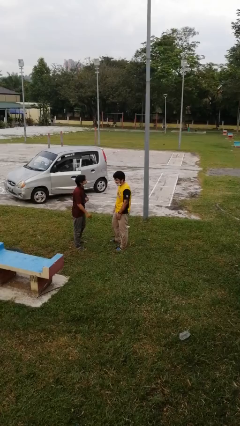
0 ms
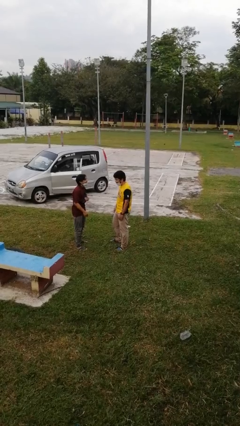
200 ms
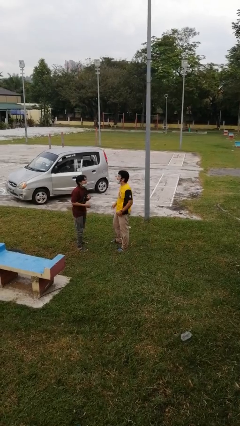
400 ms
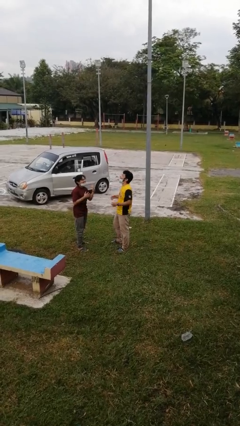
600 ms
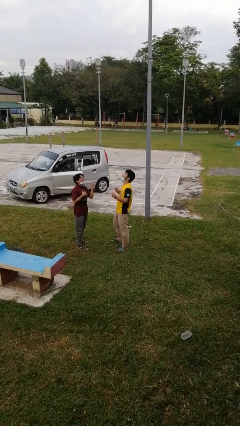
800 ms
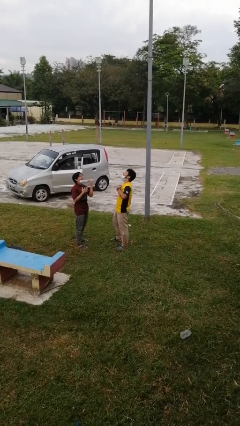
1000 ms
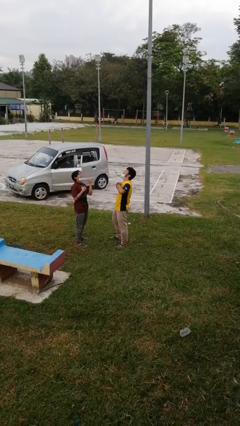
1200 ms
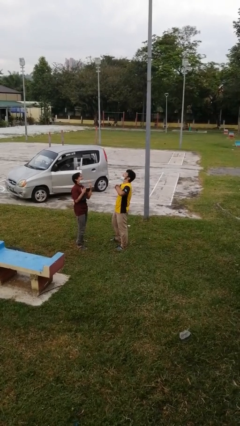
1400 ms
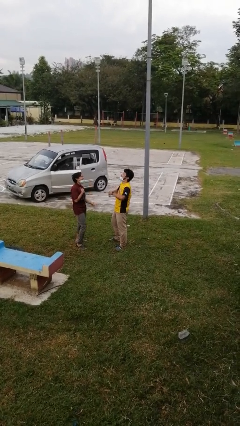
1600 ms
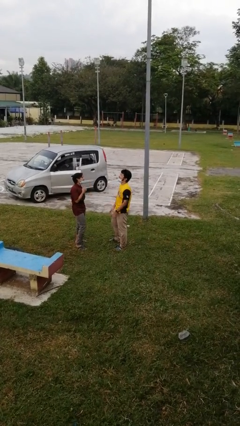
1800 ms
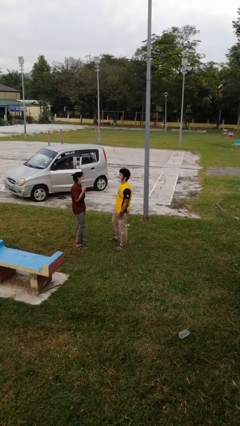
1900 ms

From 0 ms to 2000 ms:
person laughs with person

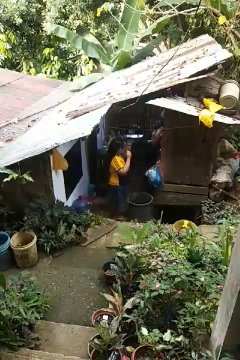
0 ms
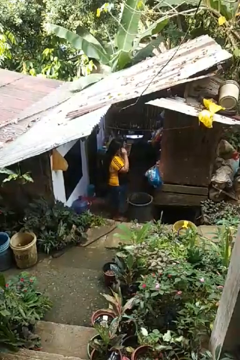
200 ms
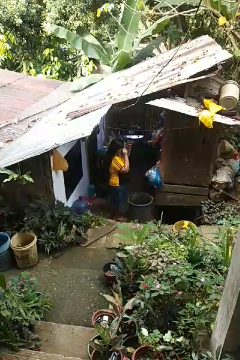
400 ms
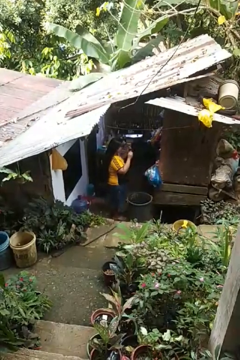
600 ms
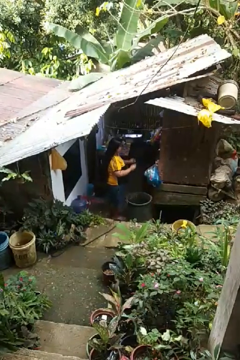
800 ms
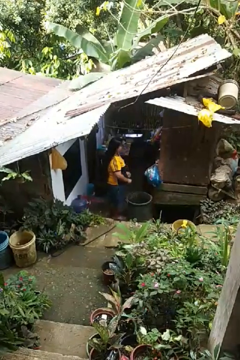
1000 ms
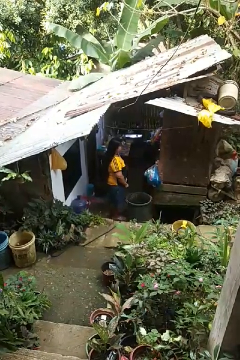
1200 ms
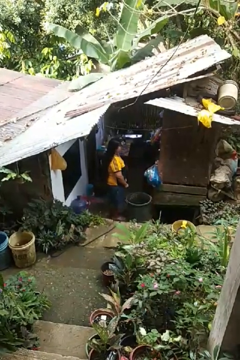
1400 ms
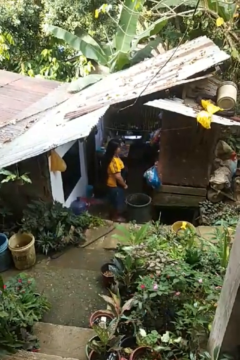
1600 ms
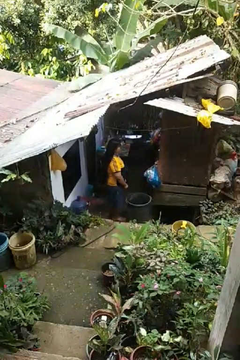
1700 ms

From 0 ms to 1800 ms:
person takes off sunglasses

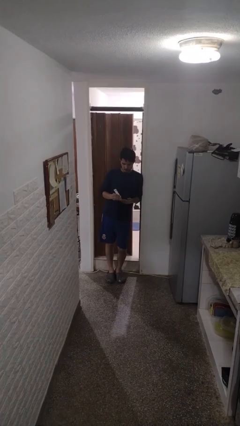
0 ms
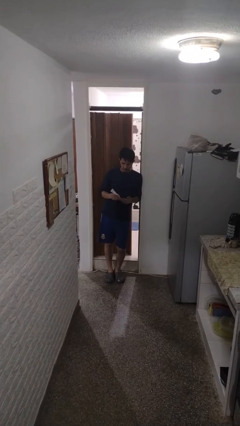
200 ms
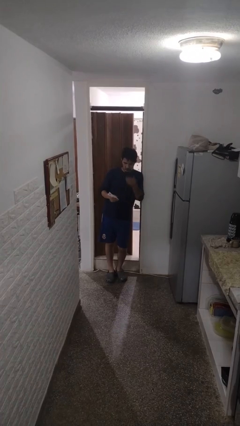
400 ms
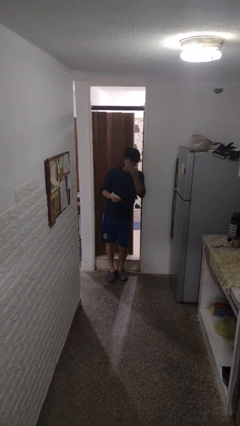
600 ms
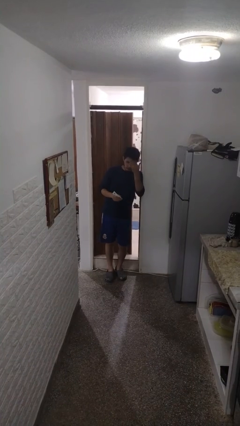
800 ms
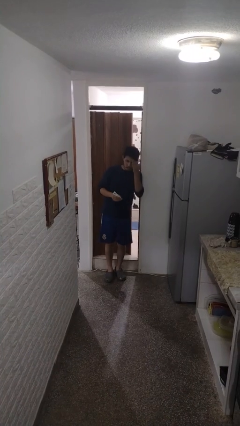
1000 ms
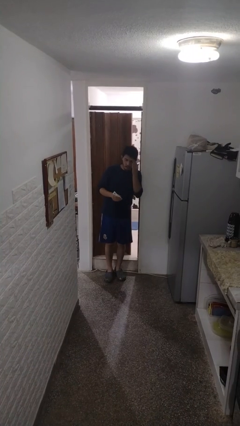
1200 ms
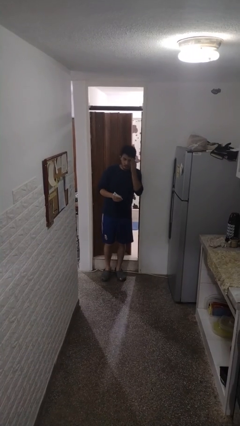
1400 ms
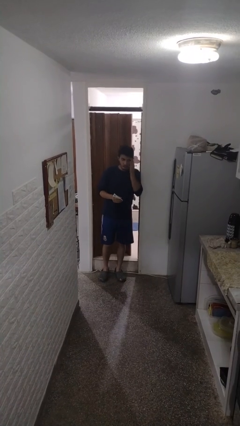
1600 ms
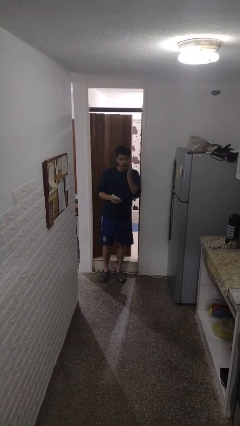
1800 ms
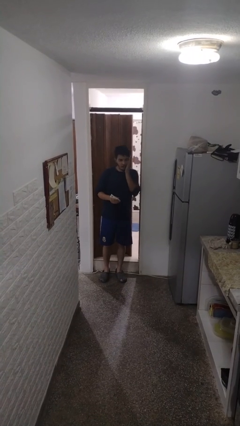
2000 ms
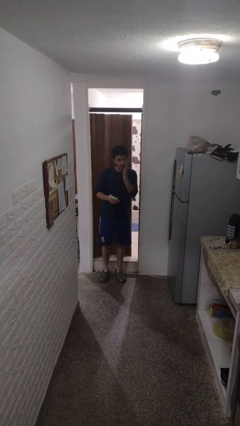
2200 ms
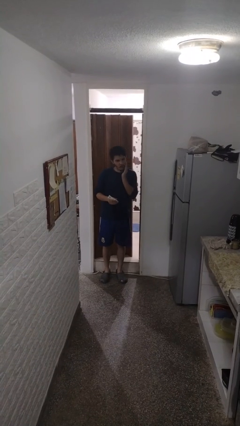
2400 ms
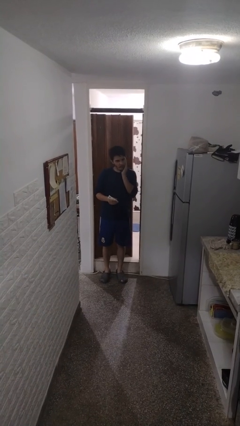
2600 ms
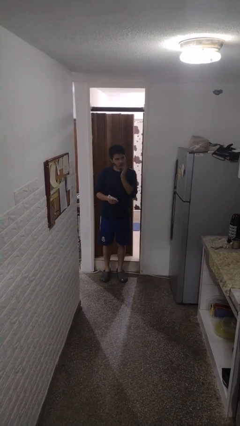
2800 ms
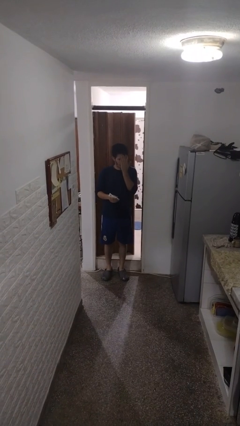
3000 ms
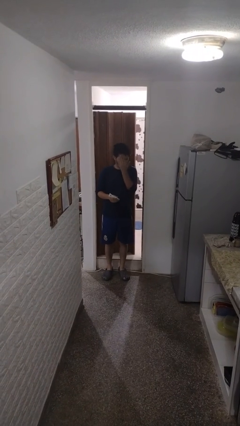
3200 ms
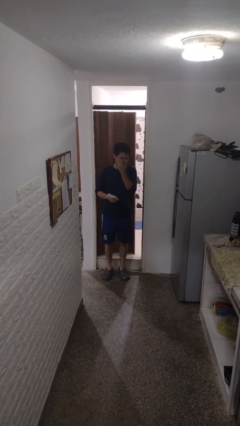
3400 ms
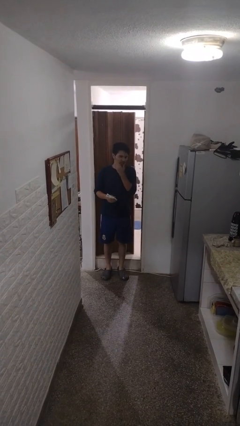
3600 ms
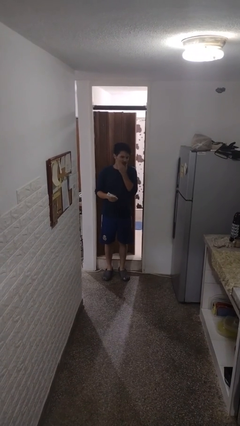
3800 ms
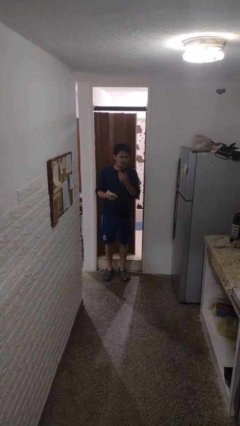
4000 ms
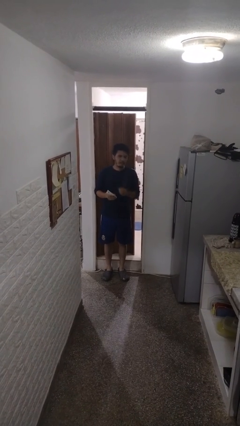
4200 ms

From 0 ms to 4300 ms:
person applies facial moisturizer

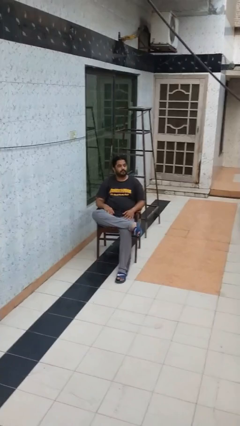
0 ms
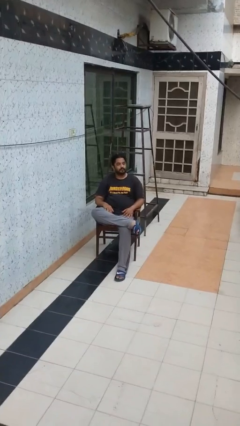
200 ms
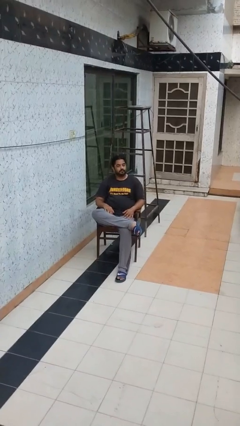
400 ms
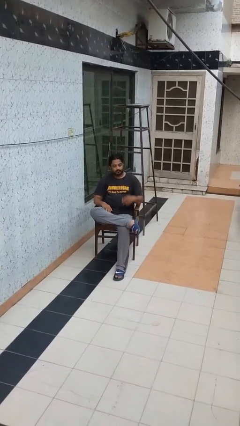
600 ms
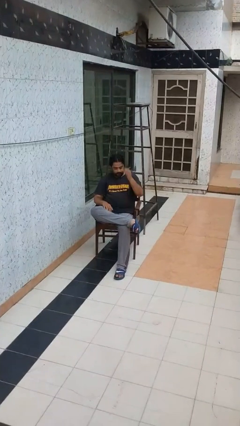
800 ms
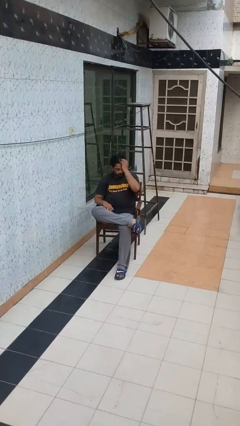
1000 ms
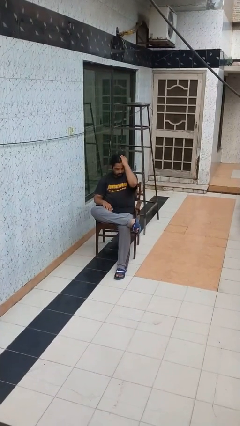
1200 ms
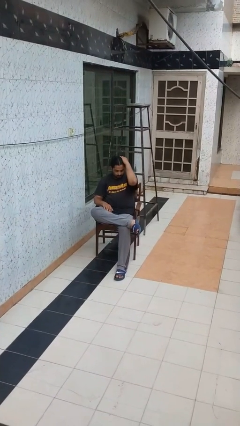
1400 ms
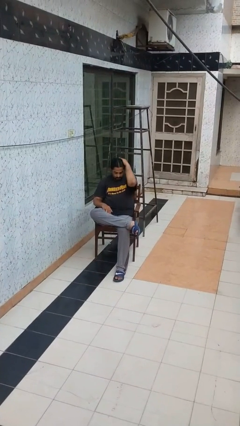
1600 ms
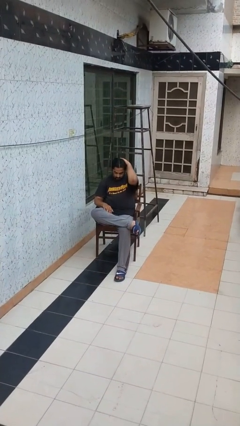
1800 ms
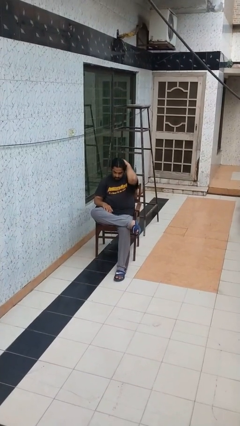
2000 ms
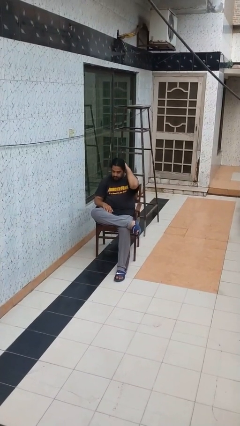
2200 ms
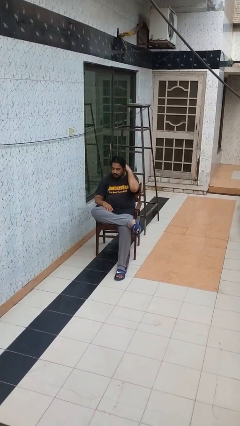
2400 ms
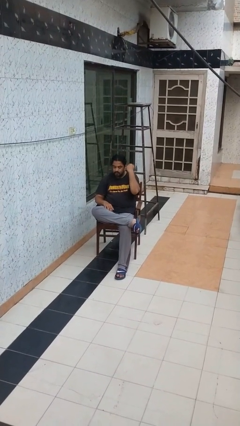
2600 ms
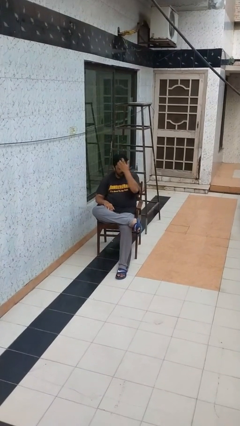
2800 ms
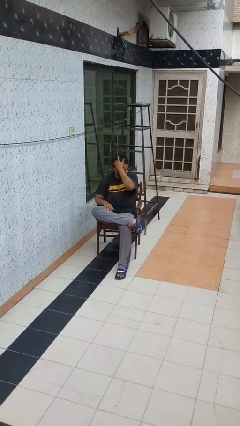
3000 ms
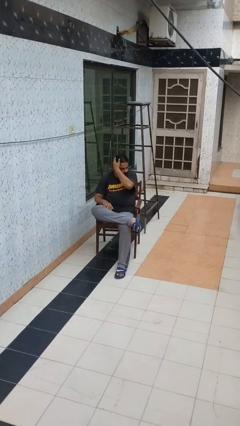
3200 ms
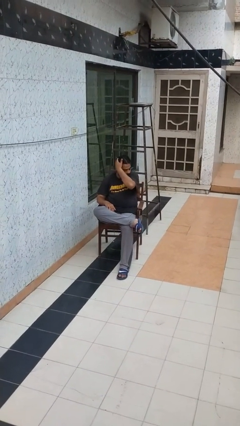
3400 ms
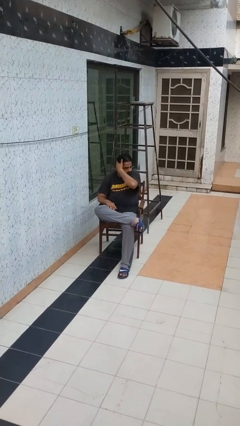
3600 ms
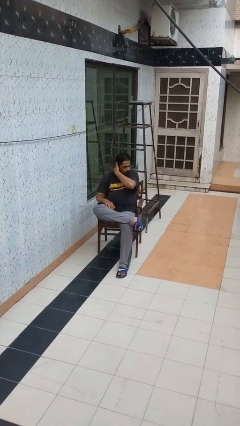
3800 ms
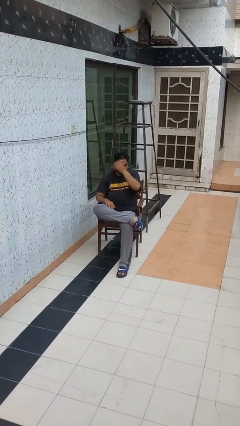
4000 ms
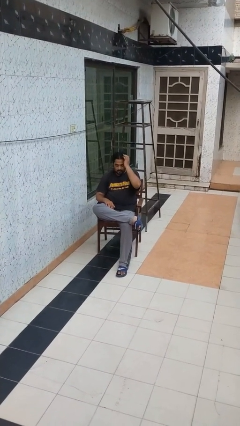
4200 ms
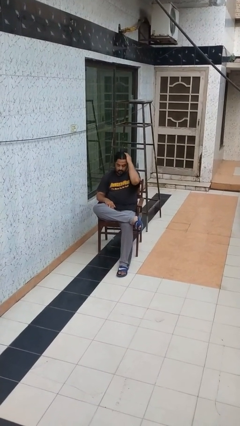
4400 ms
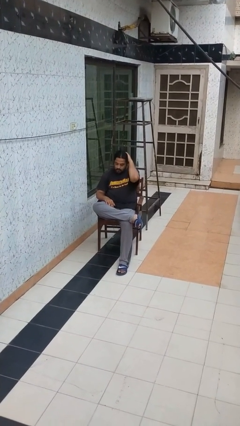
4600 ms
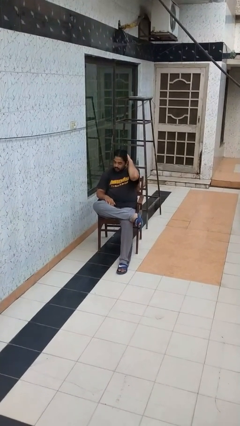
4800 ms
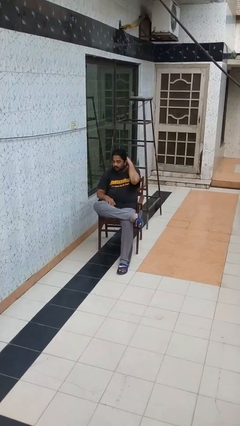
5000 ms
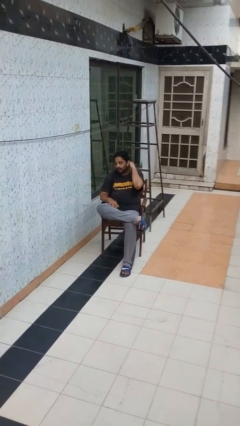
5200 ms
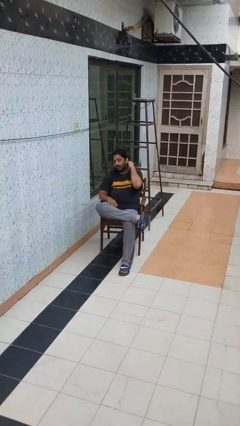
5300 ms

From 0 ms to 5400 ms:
person strokes hair

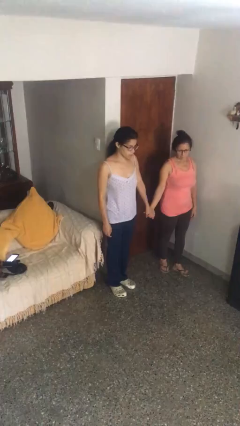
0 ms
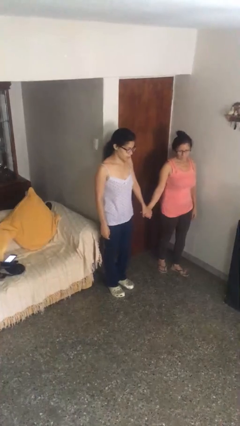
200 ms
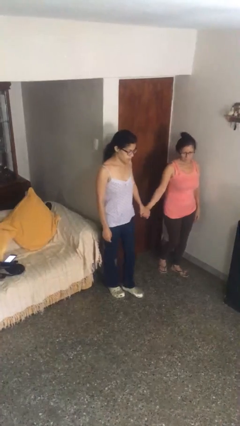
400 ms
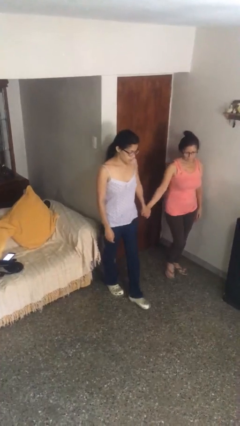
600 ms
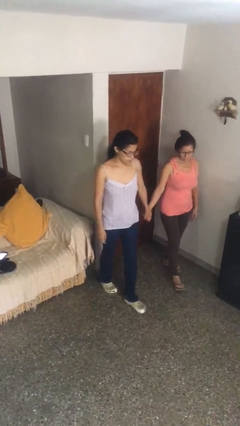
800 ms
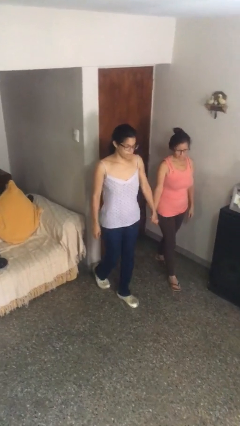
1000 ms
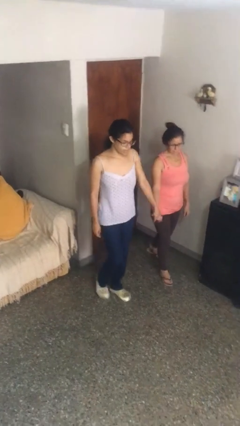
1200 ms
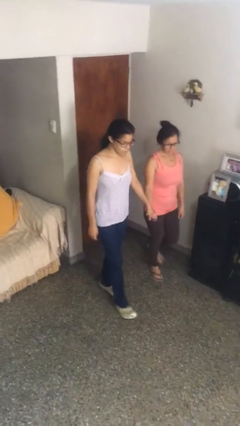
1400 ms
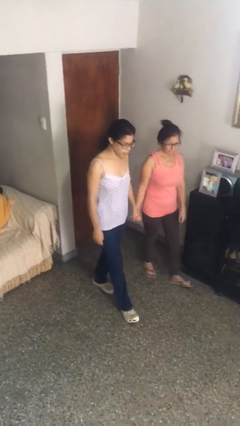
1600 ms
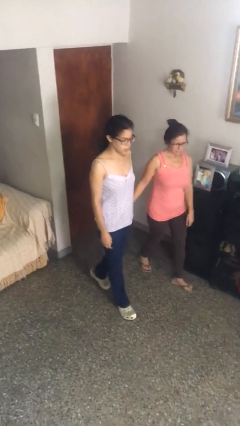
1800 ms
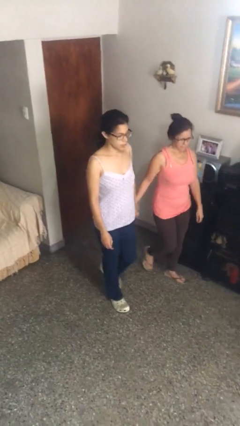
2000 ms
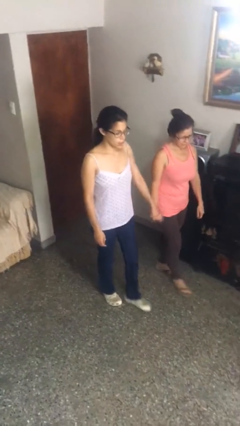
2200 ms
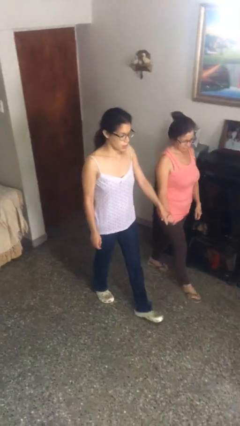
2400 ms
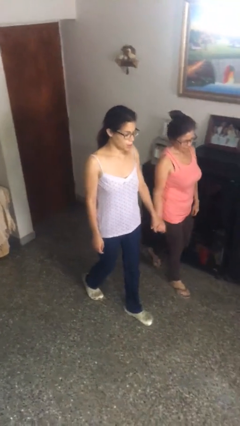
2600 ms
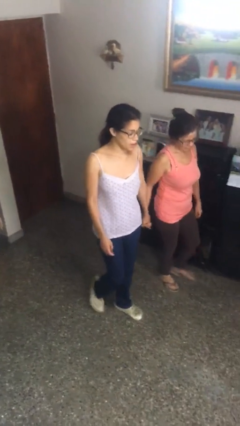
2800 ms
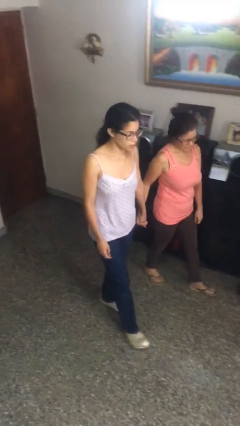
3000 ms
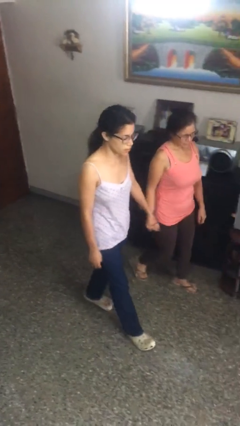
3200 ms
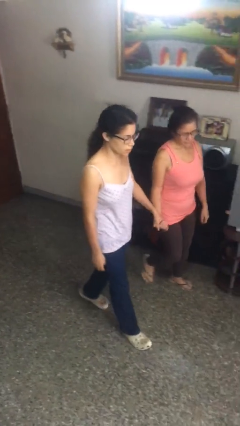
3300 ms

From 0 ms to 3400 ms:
person holds hand

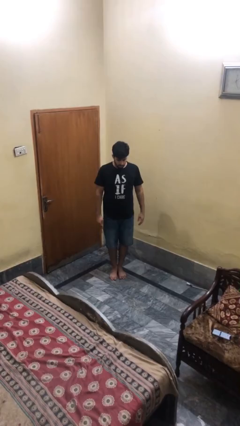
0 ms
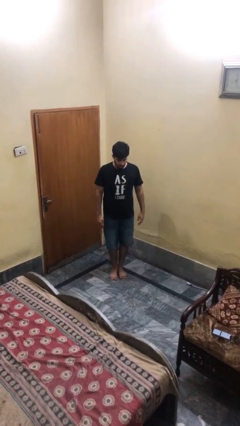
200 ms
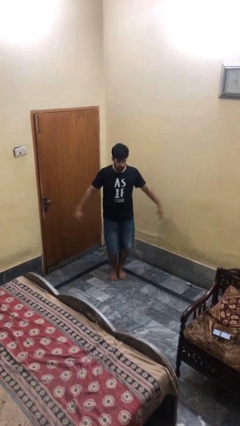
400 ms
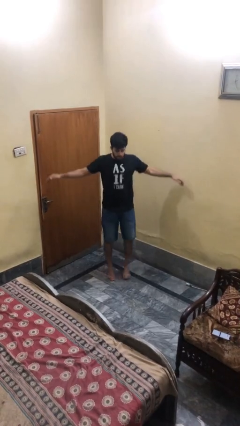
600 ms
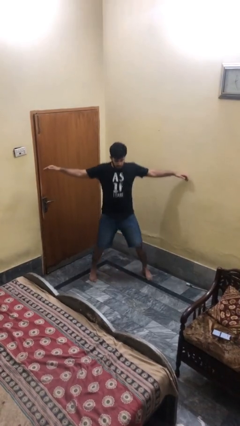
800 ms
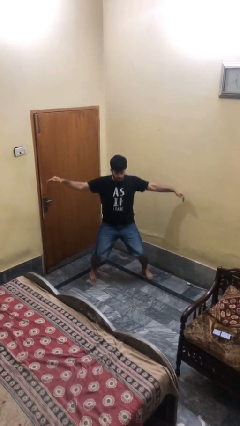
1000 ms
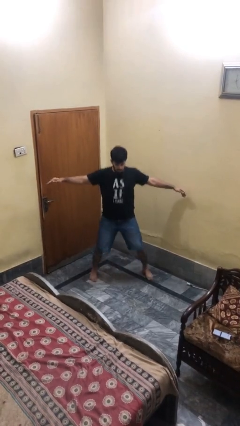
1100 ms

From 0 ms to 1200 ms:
person exercises with jumping jacks
